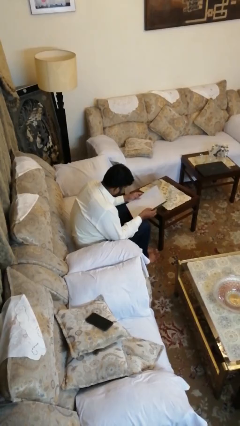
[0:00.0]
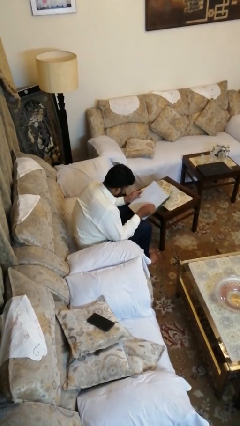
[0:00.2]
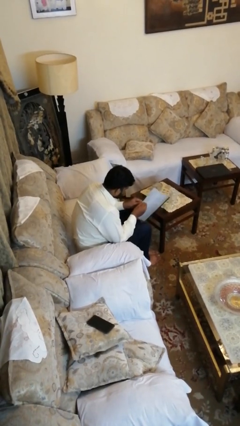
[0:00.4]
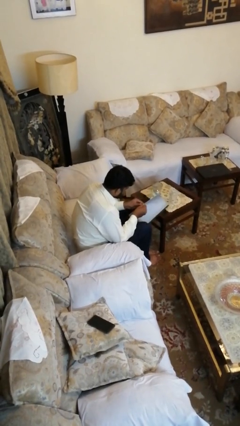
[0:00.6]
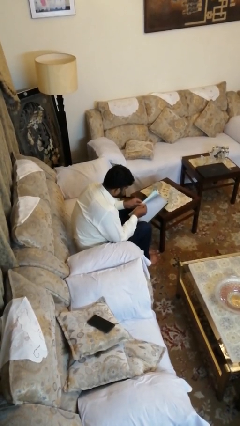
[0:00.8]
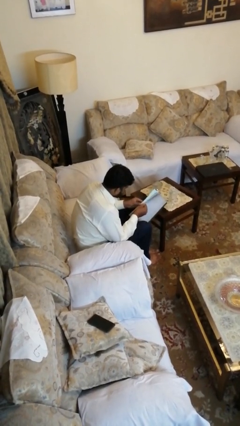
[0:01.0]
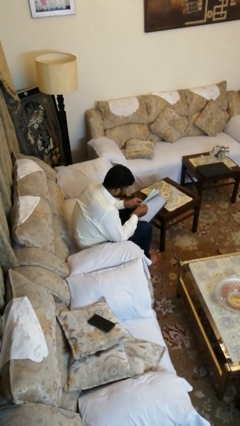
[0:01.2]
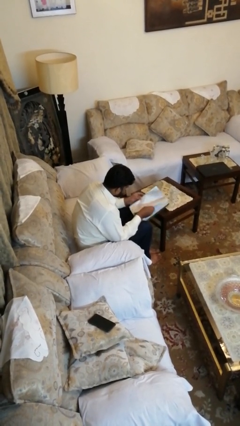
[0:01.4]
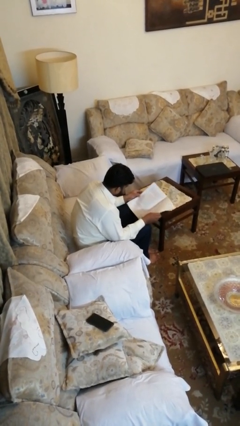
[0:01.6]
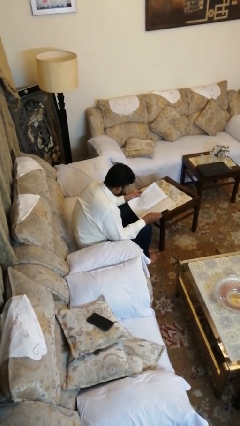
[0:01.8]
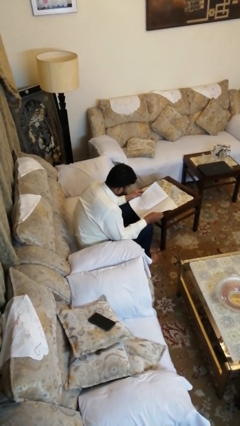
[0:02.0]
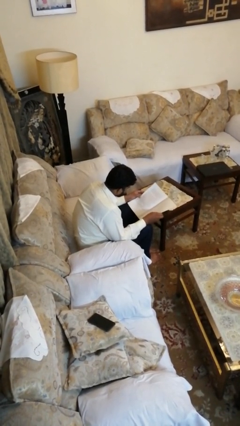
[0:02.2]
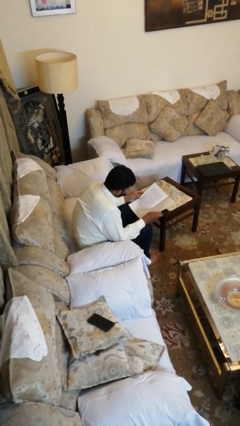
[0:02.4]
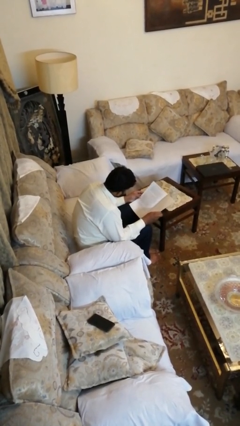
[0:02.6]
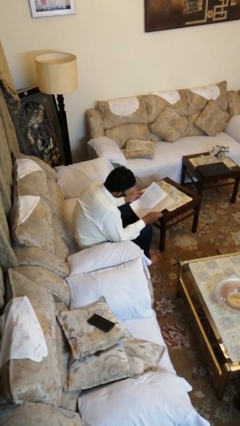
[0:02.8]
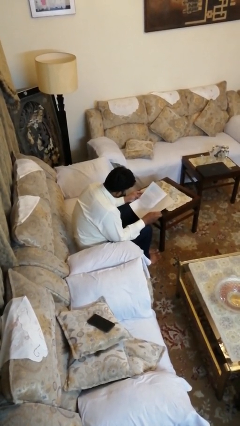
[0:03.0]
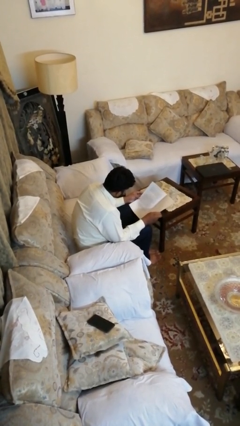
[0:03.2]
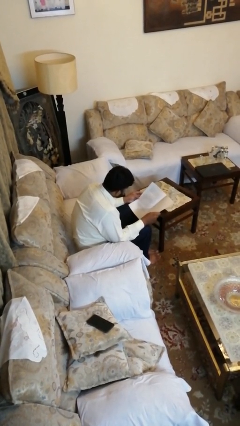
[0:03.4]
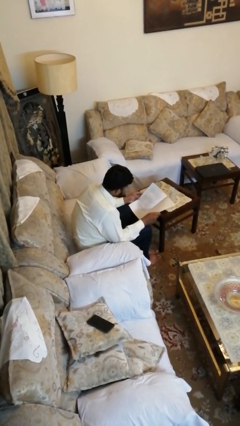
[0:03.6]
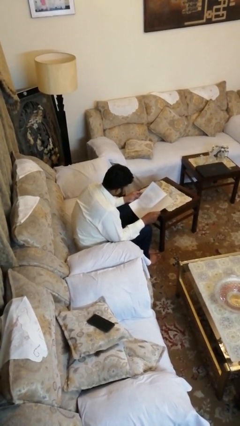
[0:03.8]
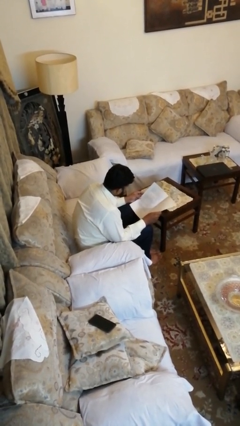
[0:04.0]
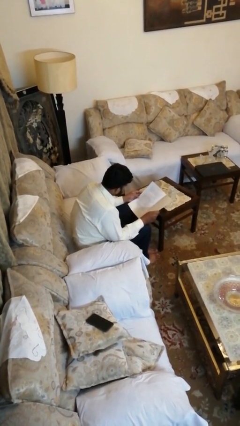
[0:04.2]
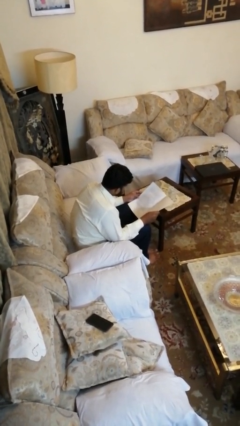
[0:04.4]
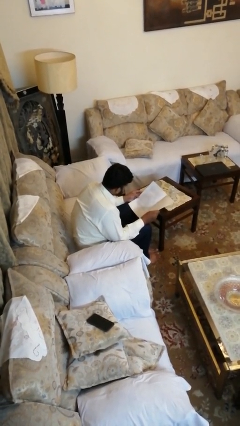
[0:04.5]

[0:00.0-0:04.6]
person reads magazine

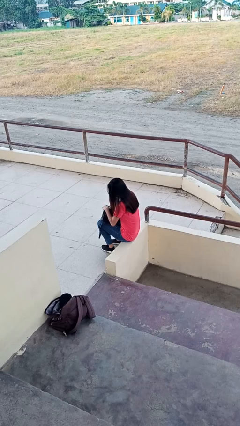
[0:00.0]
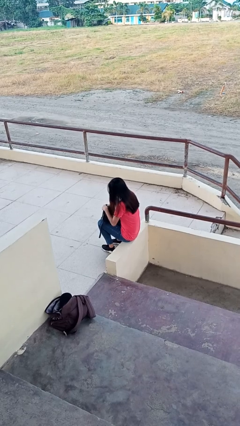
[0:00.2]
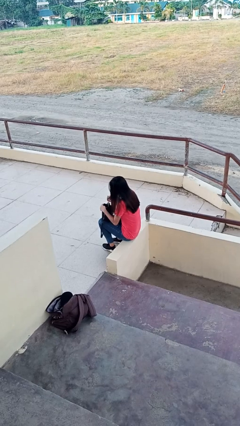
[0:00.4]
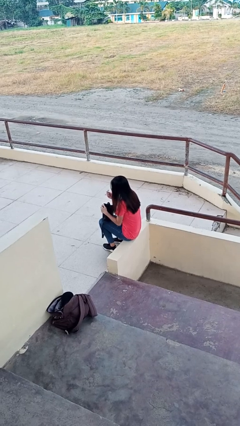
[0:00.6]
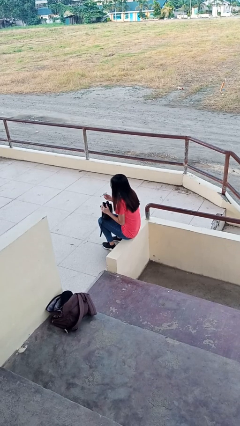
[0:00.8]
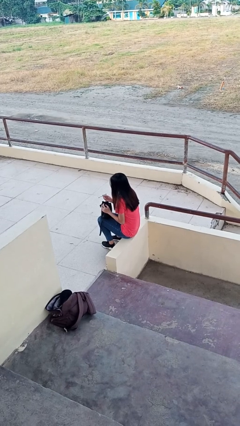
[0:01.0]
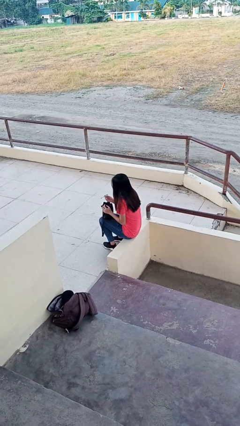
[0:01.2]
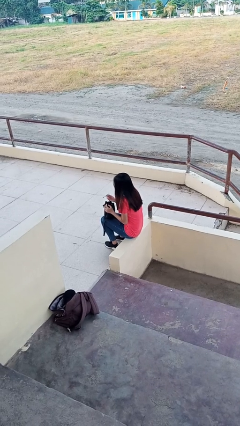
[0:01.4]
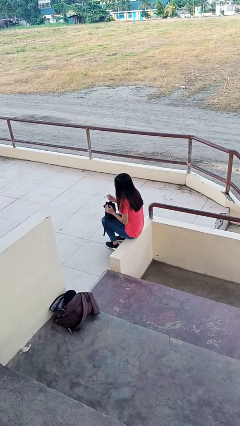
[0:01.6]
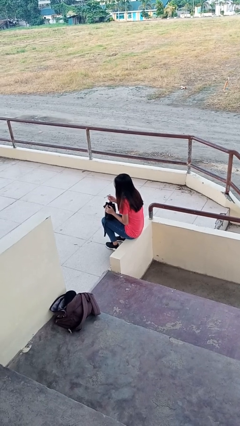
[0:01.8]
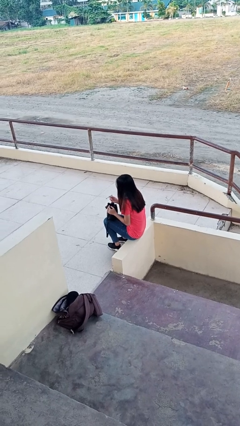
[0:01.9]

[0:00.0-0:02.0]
person takes object from purse

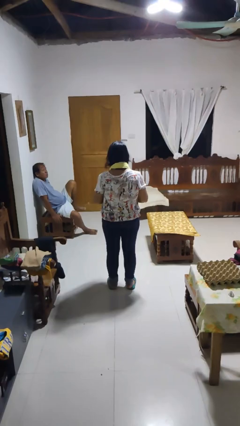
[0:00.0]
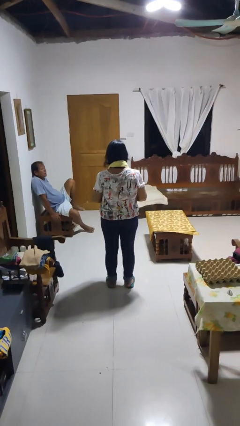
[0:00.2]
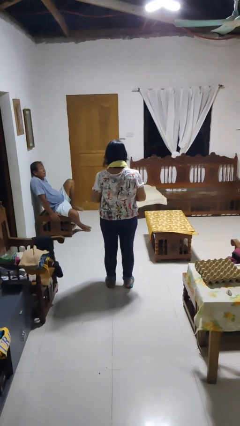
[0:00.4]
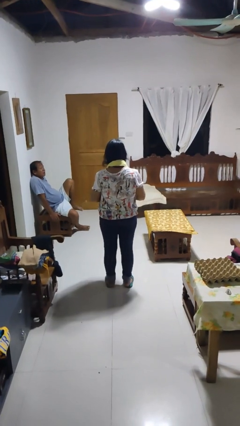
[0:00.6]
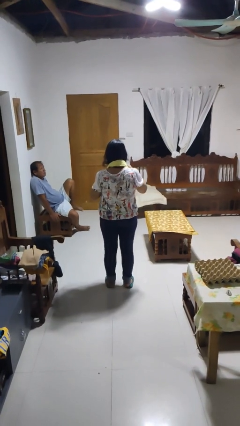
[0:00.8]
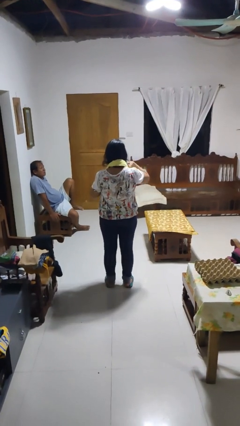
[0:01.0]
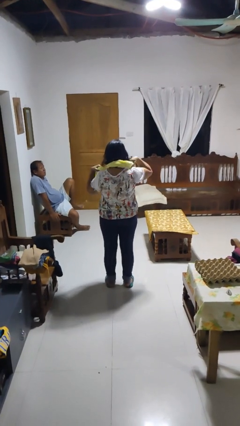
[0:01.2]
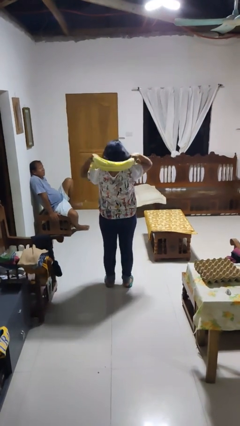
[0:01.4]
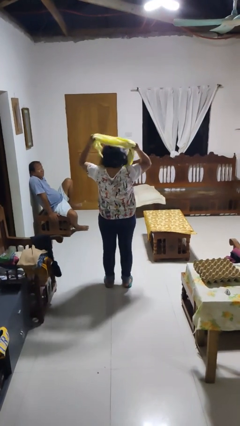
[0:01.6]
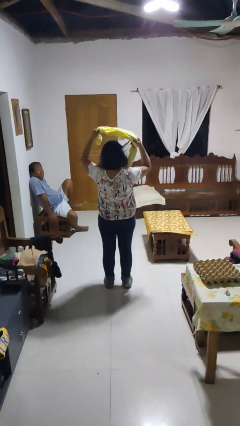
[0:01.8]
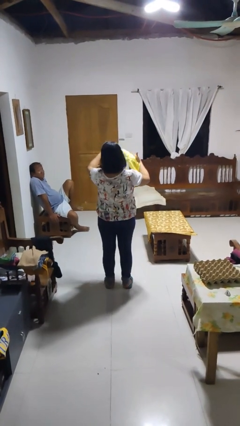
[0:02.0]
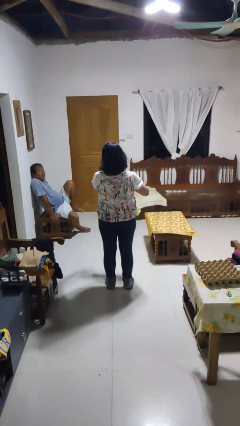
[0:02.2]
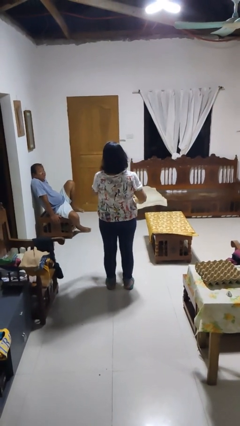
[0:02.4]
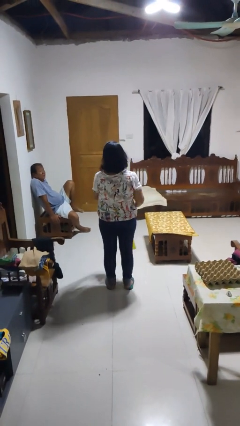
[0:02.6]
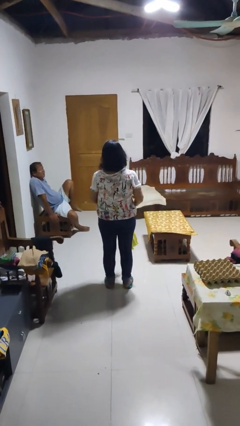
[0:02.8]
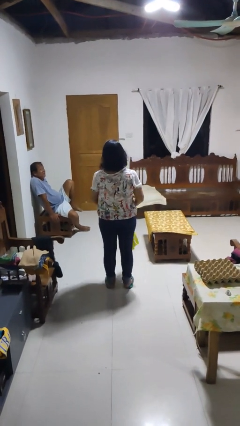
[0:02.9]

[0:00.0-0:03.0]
person takes off scarf

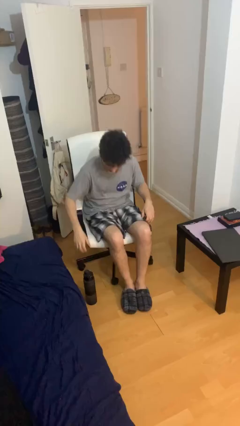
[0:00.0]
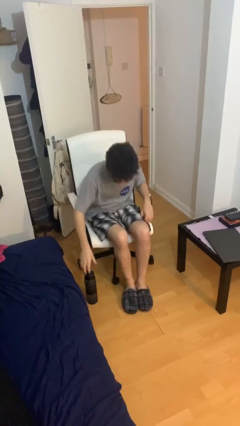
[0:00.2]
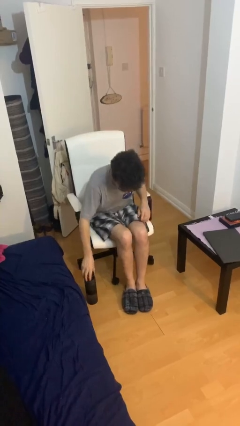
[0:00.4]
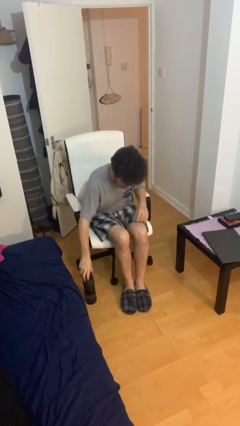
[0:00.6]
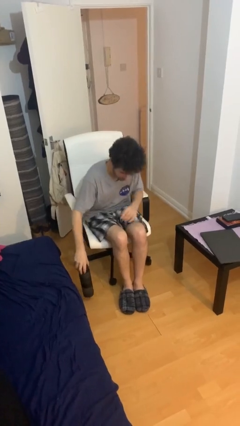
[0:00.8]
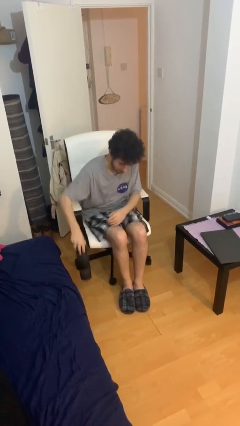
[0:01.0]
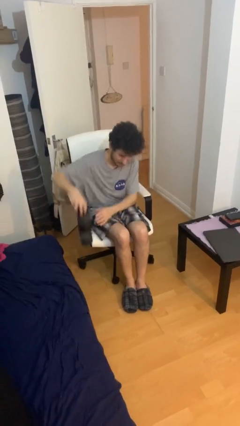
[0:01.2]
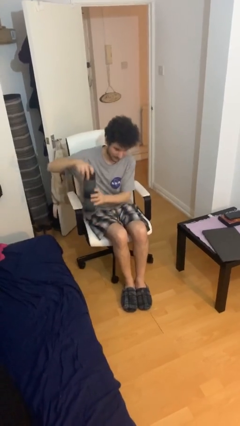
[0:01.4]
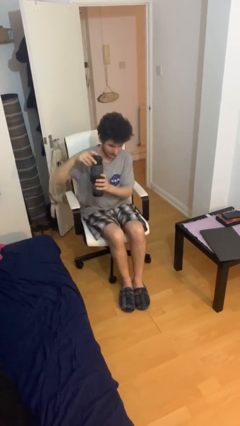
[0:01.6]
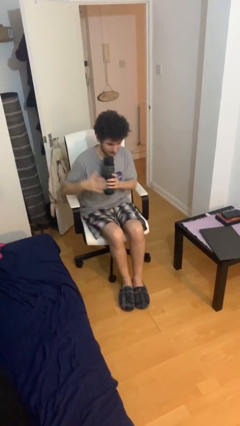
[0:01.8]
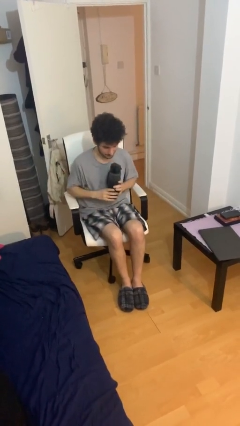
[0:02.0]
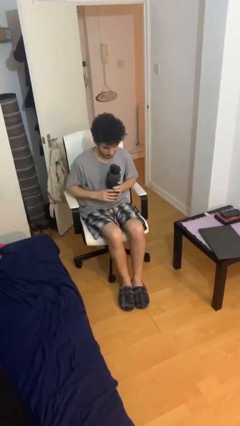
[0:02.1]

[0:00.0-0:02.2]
person picks up object from floor

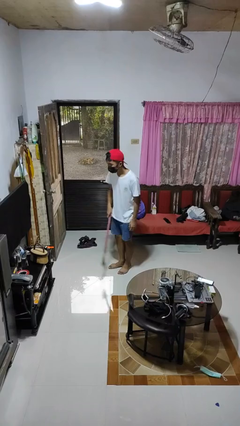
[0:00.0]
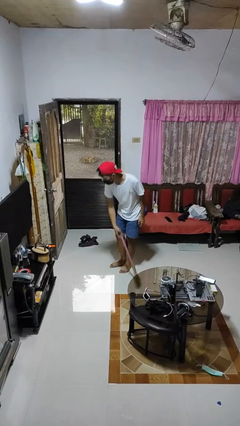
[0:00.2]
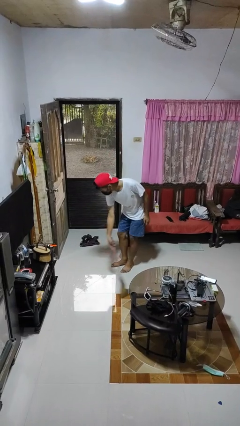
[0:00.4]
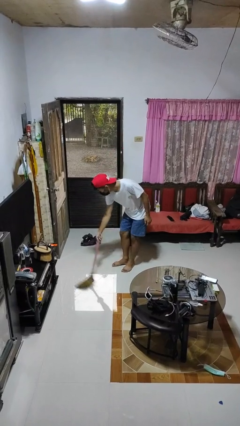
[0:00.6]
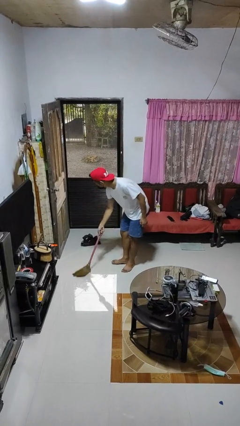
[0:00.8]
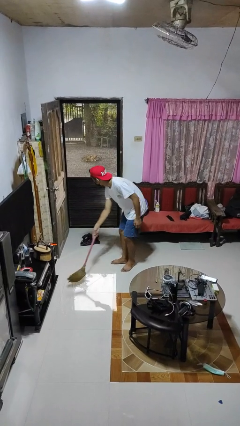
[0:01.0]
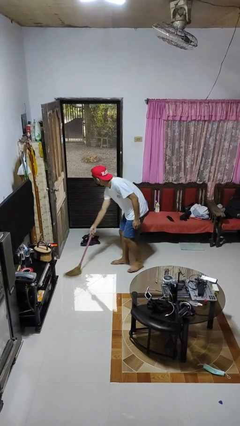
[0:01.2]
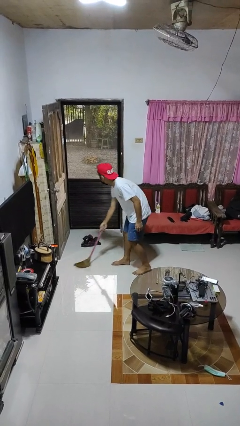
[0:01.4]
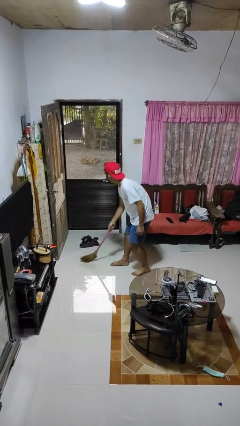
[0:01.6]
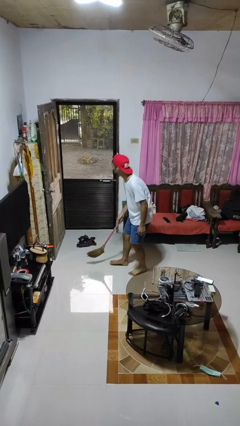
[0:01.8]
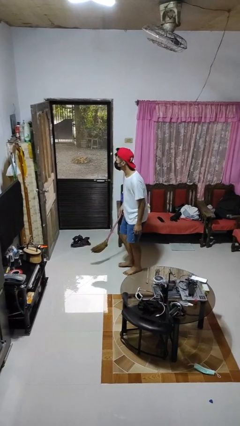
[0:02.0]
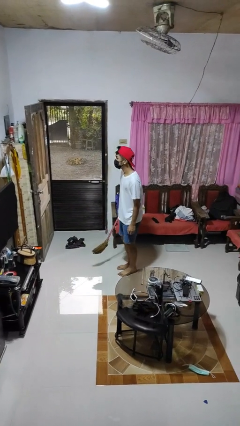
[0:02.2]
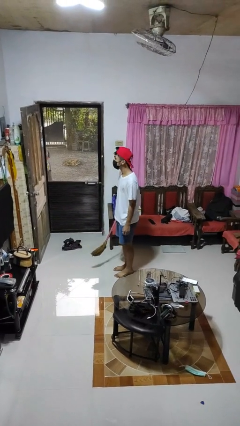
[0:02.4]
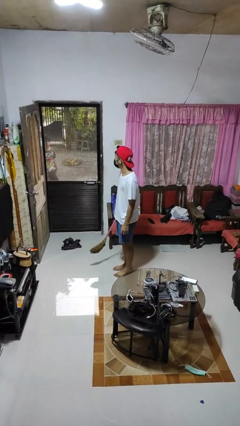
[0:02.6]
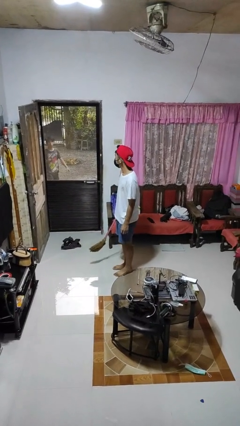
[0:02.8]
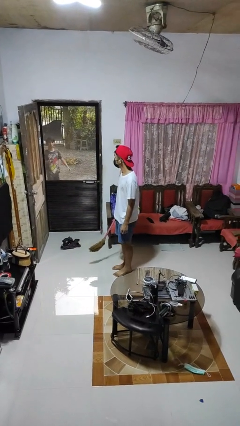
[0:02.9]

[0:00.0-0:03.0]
person sweeps floor

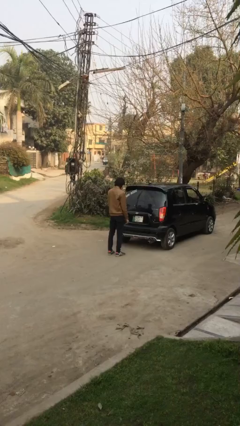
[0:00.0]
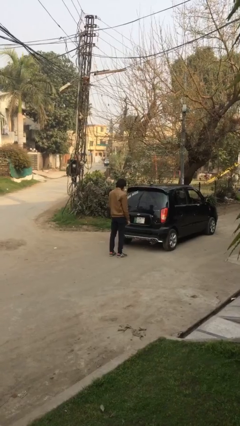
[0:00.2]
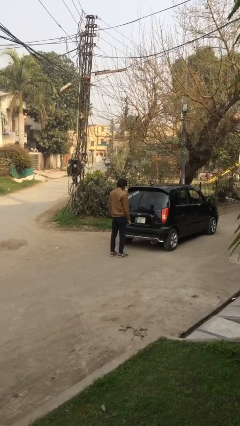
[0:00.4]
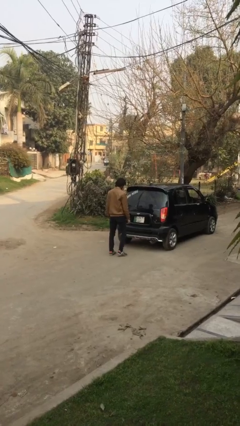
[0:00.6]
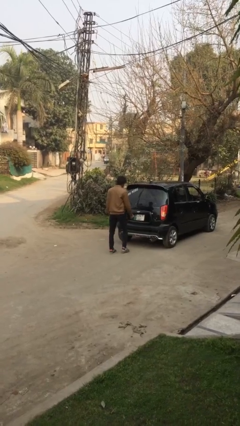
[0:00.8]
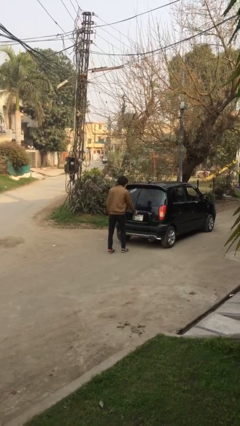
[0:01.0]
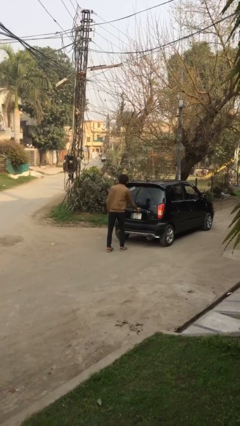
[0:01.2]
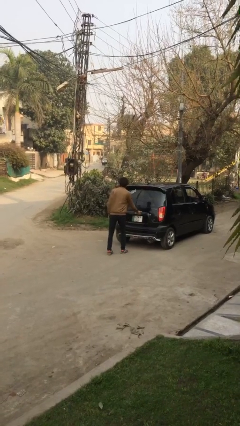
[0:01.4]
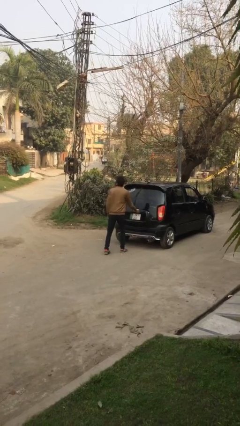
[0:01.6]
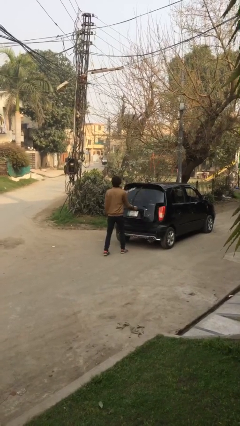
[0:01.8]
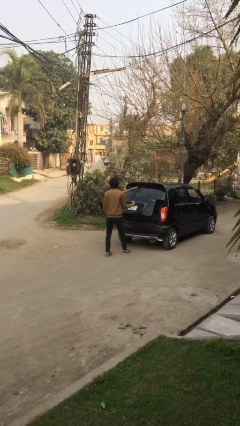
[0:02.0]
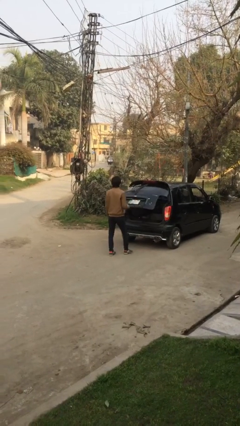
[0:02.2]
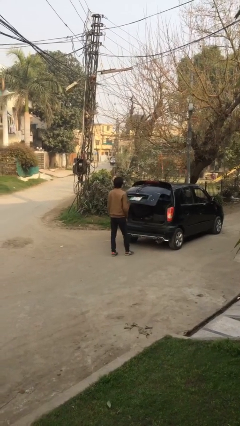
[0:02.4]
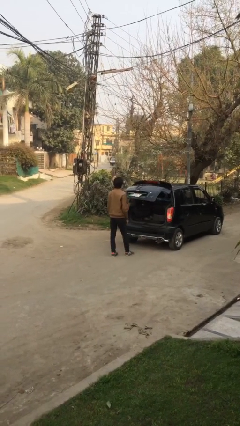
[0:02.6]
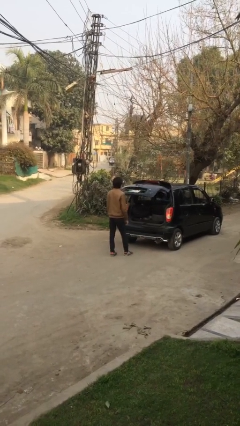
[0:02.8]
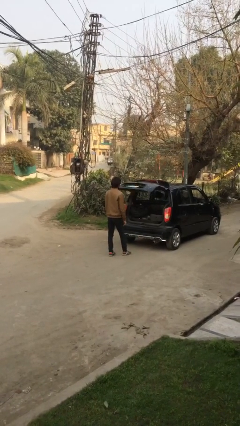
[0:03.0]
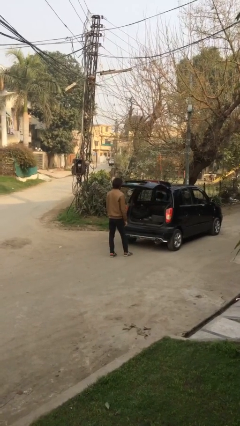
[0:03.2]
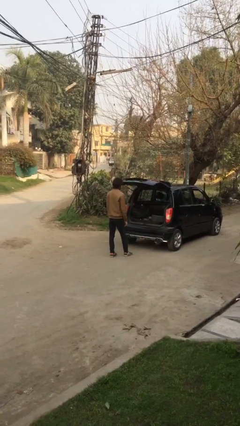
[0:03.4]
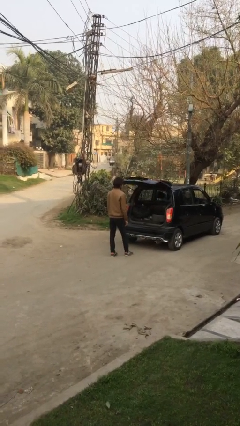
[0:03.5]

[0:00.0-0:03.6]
person opens car trunk
